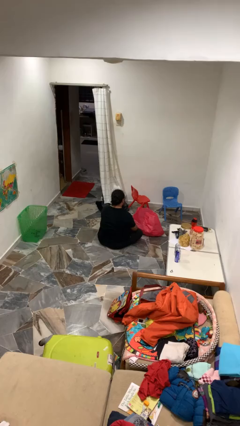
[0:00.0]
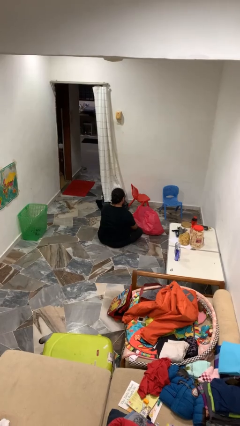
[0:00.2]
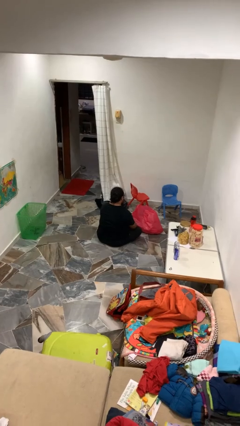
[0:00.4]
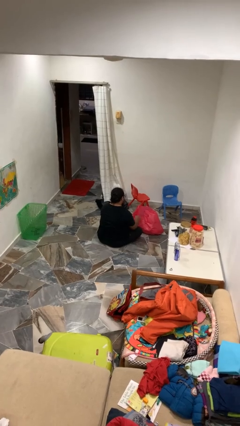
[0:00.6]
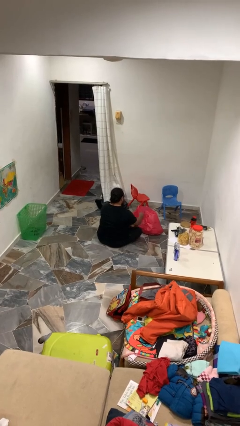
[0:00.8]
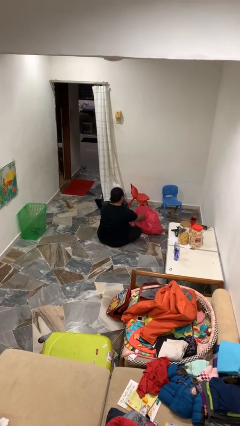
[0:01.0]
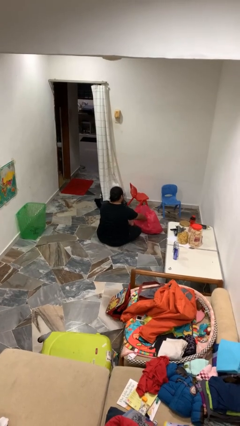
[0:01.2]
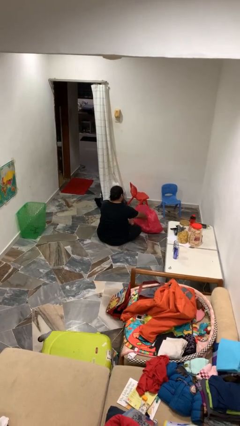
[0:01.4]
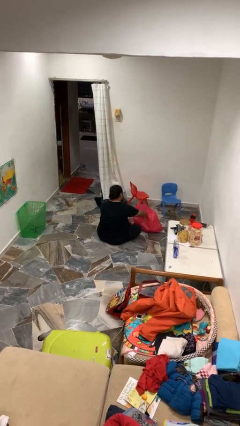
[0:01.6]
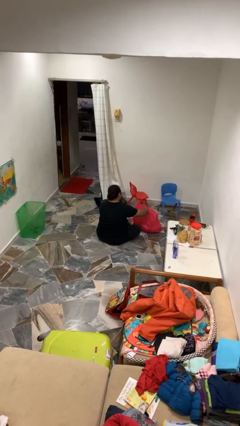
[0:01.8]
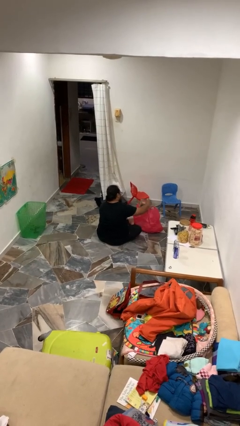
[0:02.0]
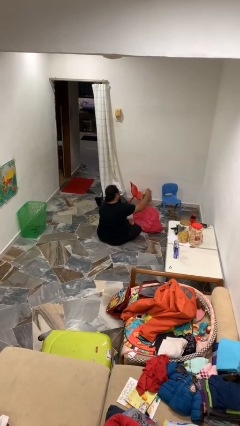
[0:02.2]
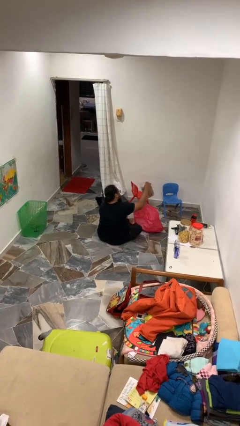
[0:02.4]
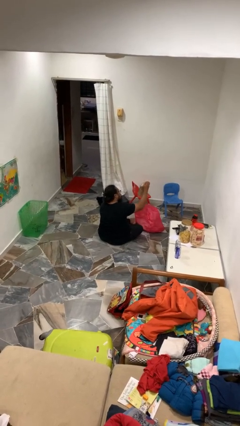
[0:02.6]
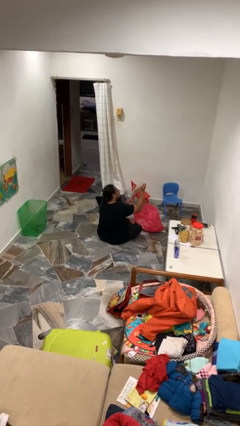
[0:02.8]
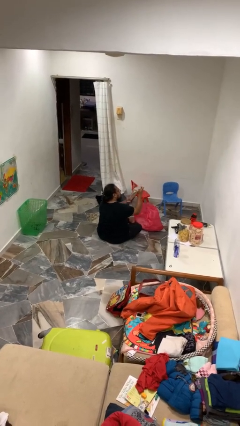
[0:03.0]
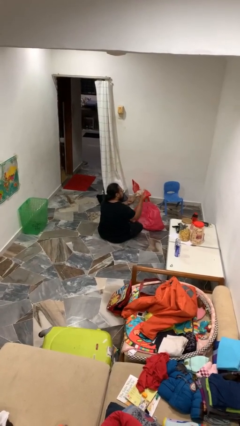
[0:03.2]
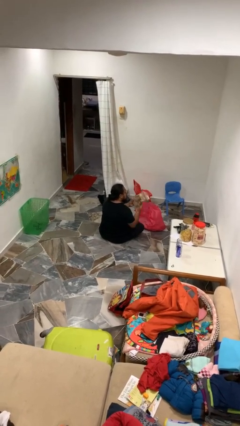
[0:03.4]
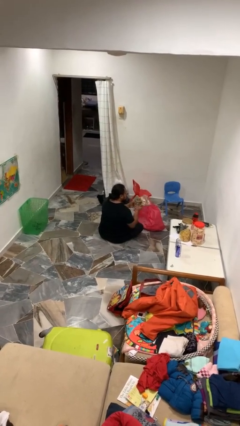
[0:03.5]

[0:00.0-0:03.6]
person takes object from bag

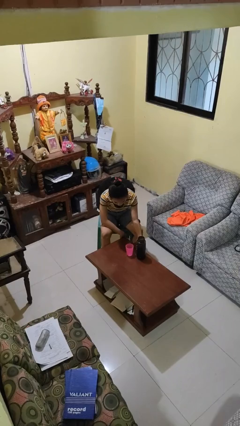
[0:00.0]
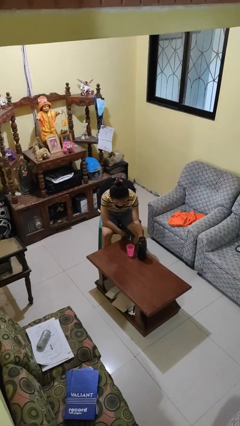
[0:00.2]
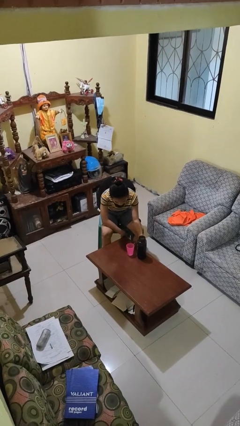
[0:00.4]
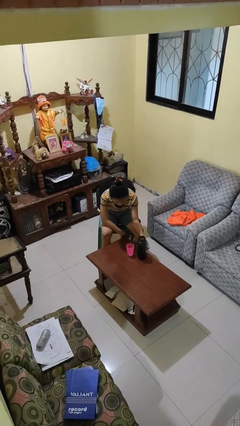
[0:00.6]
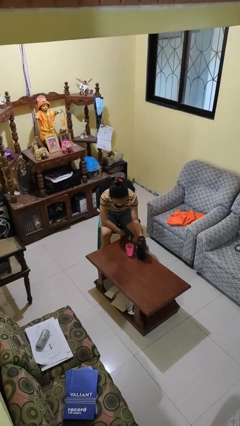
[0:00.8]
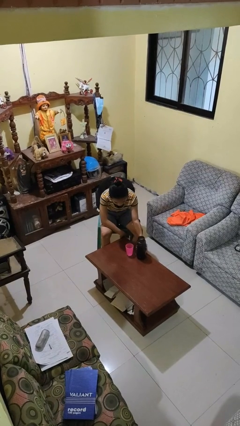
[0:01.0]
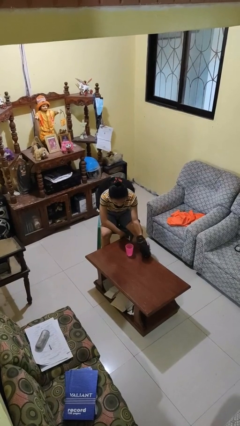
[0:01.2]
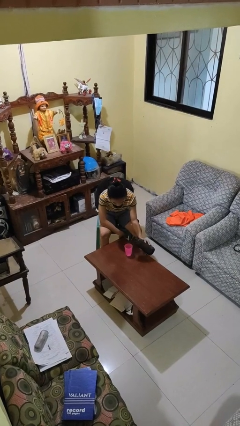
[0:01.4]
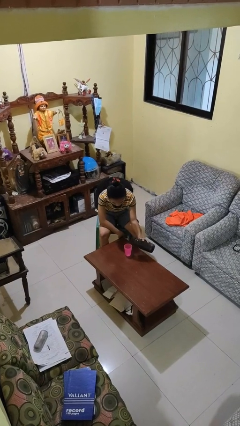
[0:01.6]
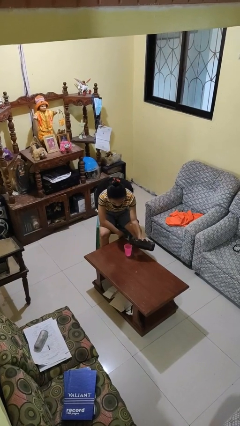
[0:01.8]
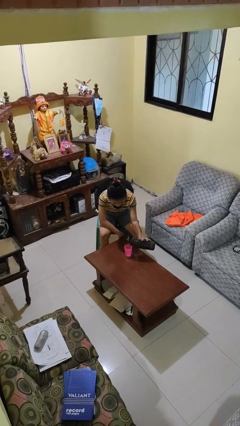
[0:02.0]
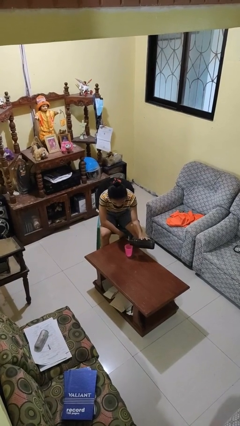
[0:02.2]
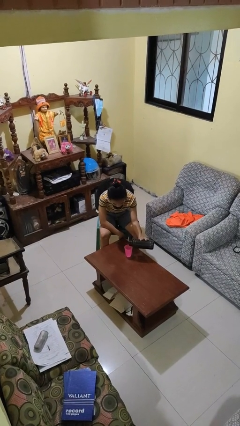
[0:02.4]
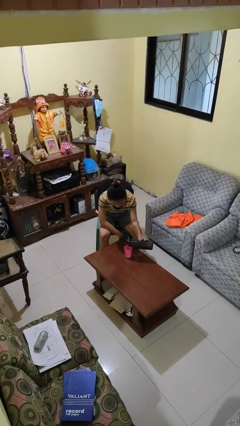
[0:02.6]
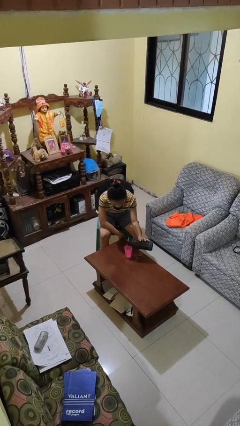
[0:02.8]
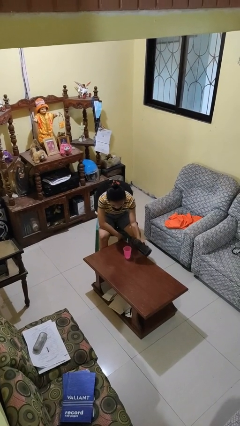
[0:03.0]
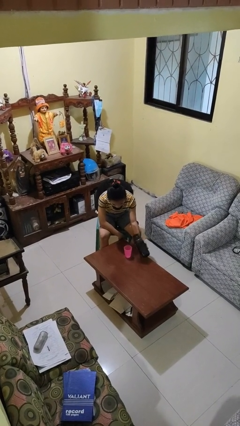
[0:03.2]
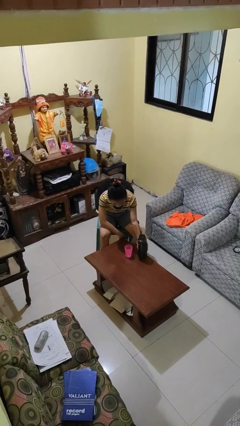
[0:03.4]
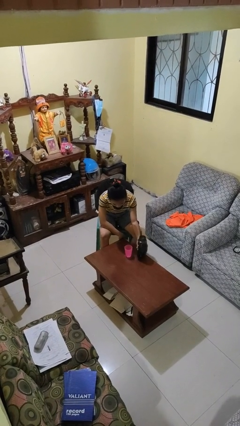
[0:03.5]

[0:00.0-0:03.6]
person pours liquid into cup

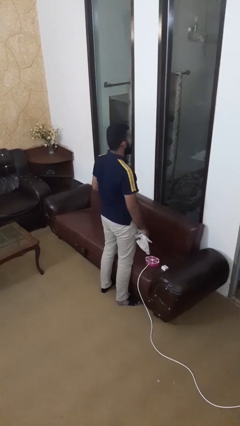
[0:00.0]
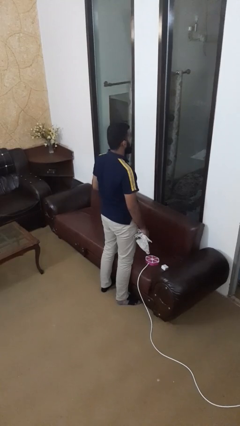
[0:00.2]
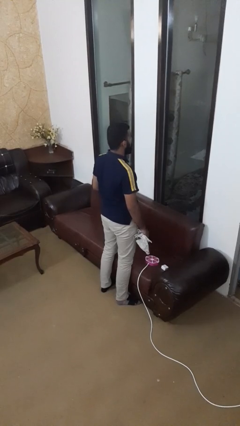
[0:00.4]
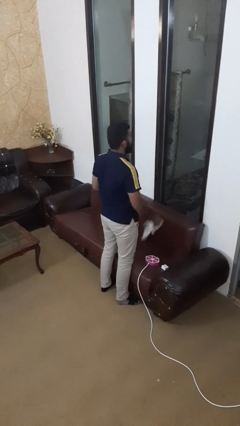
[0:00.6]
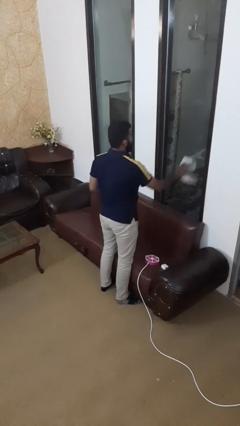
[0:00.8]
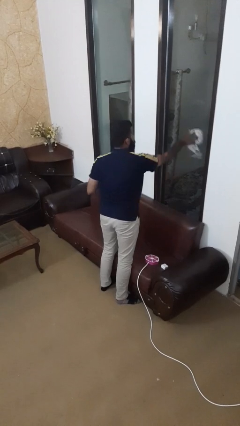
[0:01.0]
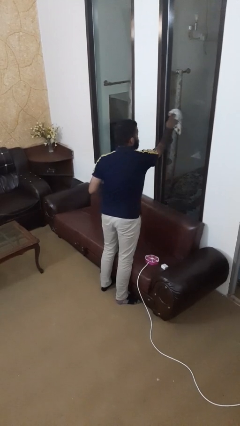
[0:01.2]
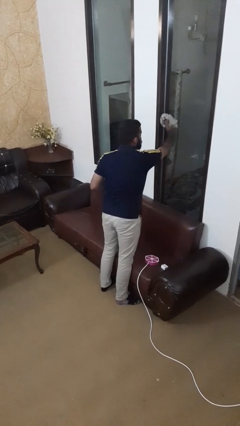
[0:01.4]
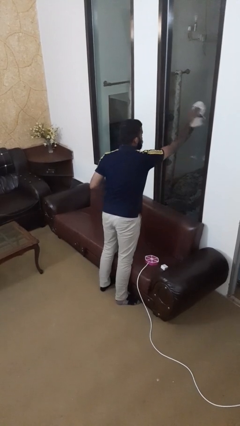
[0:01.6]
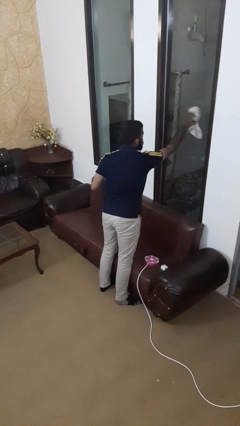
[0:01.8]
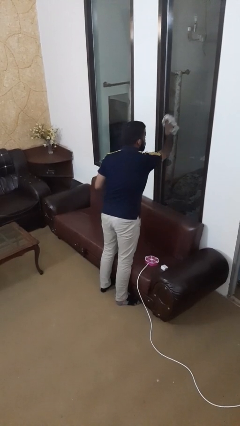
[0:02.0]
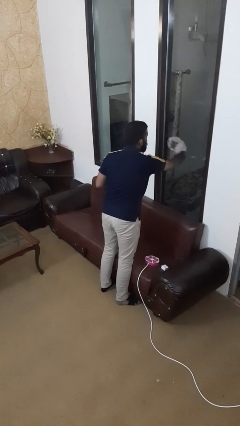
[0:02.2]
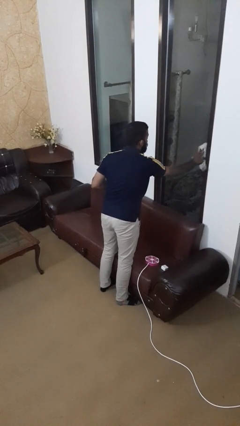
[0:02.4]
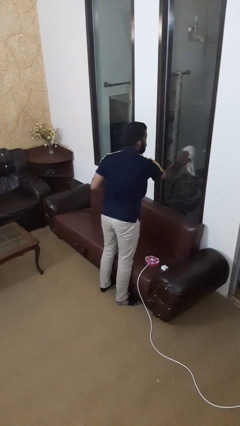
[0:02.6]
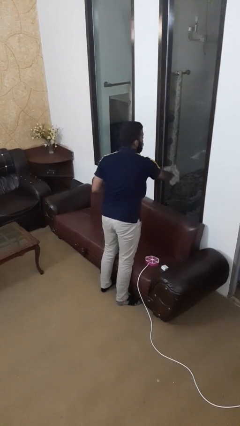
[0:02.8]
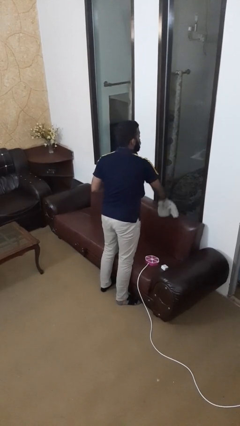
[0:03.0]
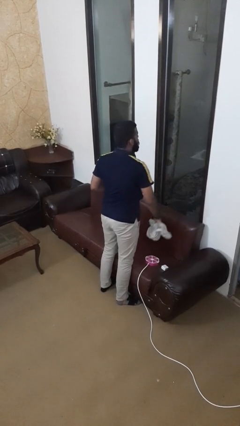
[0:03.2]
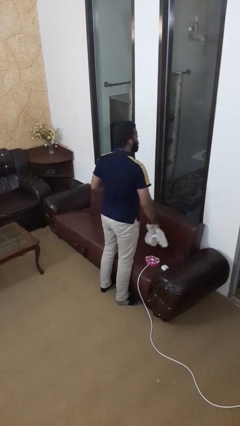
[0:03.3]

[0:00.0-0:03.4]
person washes window

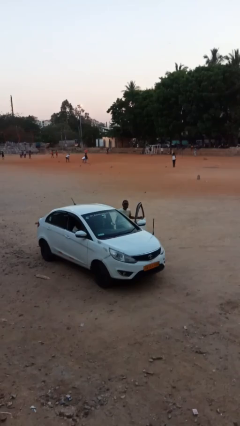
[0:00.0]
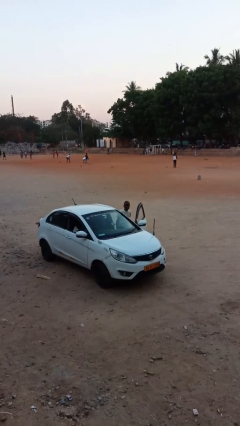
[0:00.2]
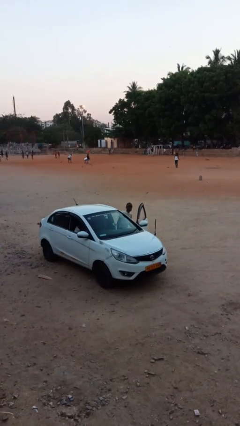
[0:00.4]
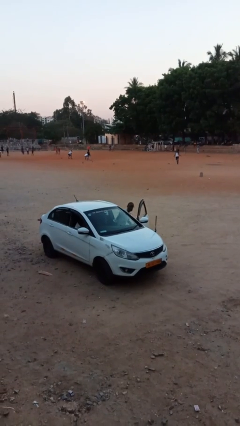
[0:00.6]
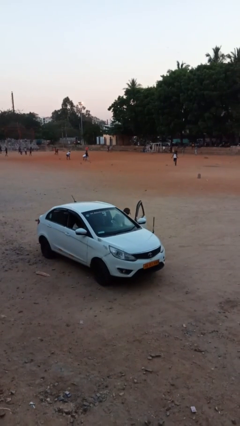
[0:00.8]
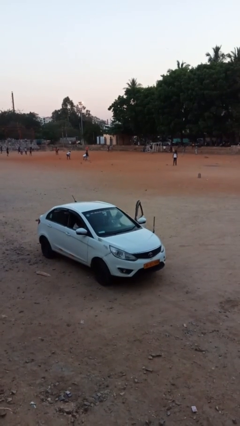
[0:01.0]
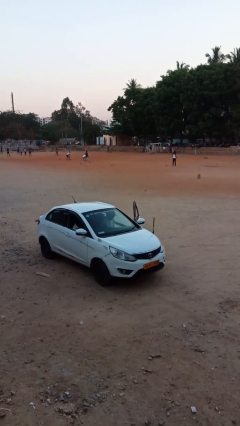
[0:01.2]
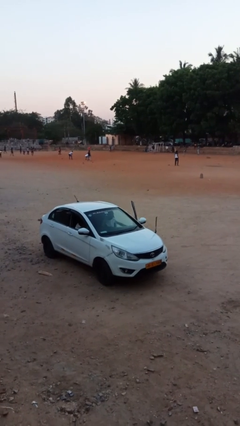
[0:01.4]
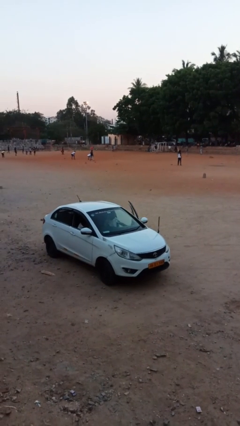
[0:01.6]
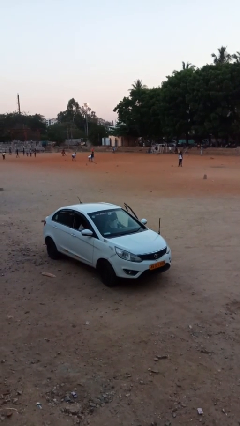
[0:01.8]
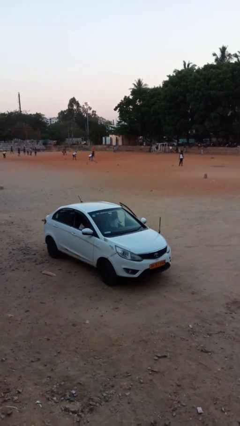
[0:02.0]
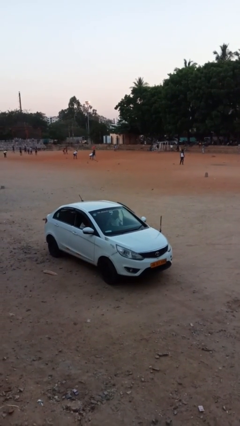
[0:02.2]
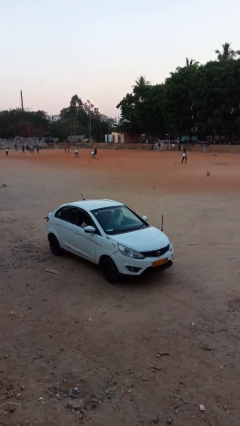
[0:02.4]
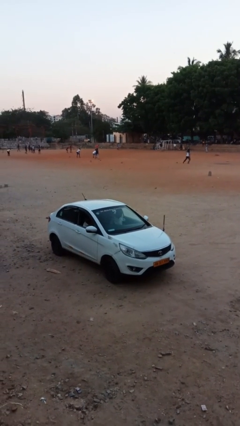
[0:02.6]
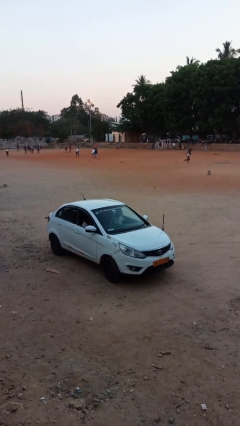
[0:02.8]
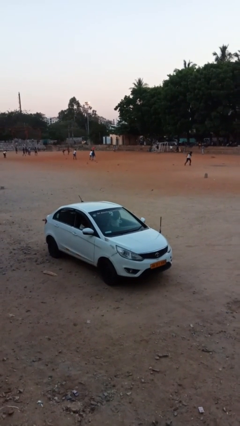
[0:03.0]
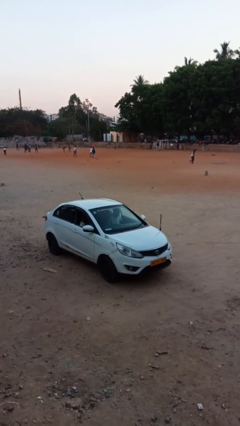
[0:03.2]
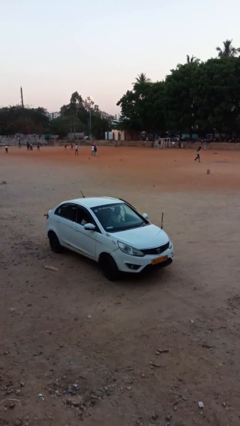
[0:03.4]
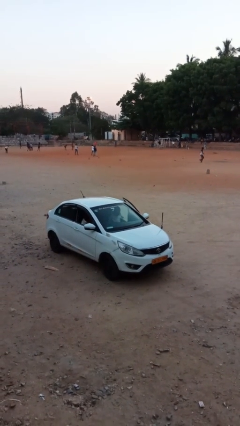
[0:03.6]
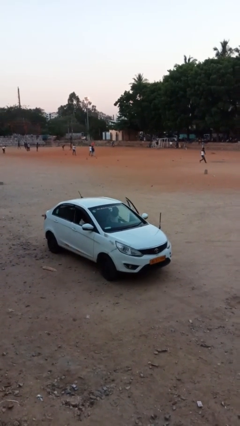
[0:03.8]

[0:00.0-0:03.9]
person enters car

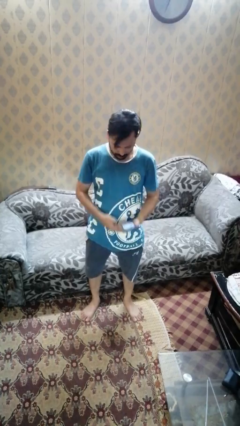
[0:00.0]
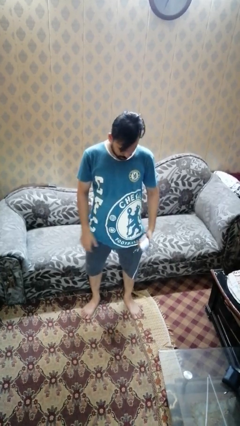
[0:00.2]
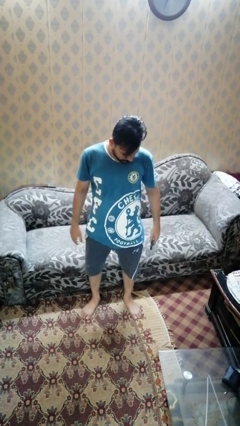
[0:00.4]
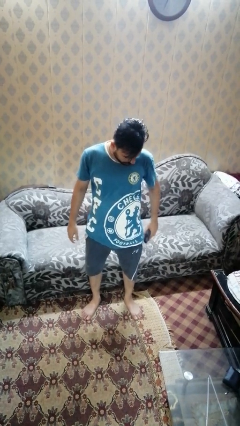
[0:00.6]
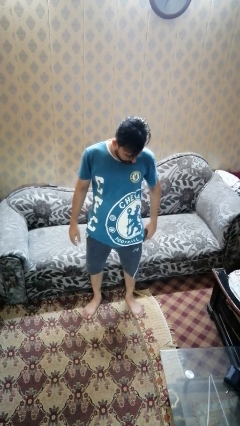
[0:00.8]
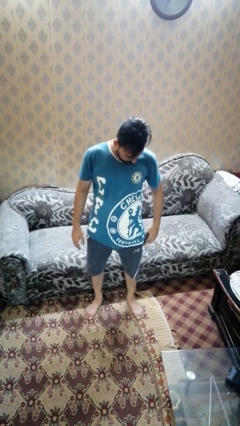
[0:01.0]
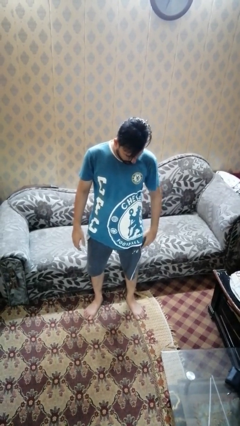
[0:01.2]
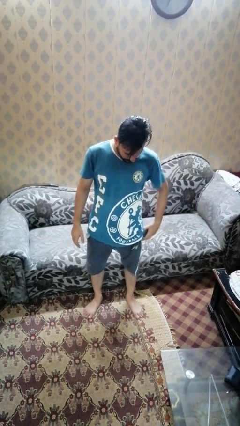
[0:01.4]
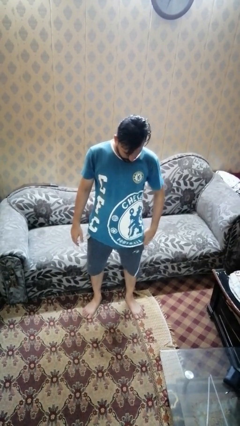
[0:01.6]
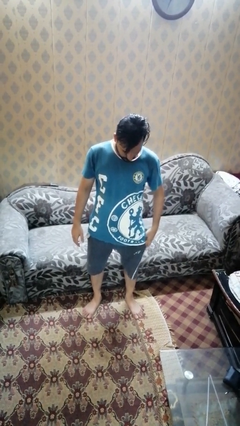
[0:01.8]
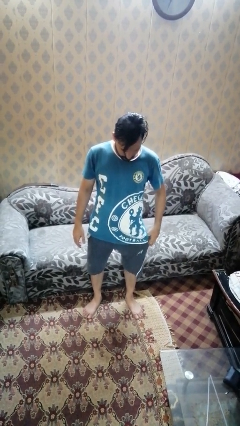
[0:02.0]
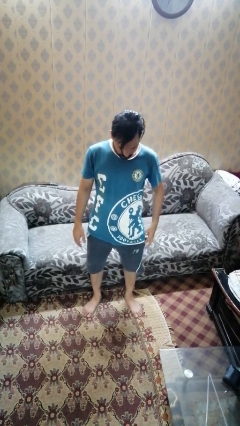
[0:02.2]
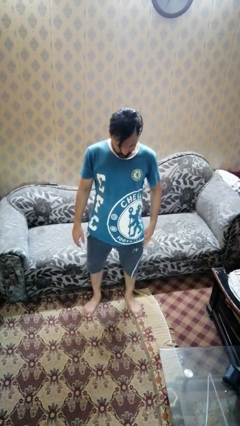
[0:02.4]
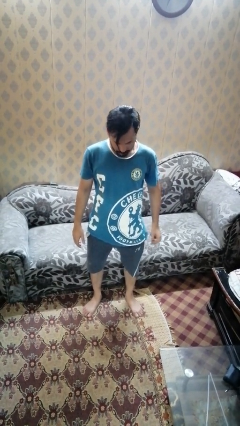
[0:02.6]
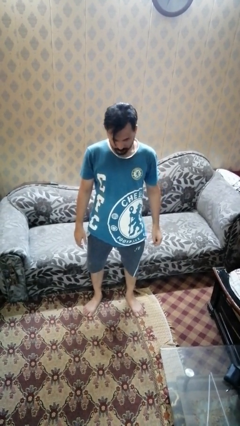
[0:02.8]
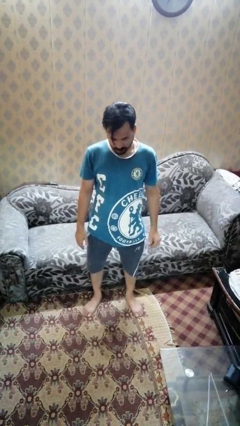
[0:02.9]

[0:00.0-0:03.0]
person puts phone into pocket

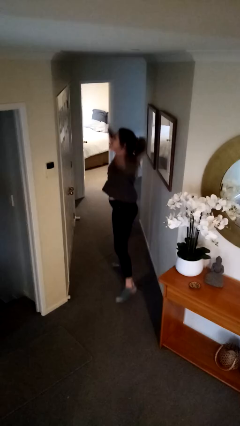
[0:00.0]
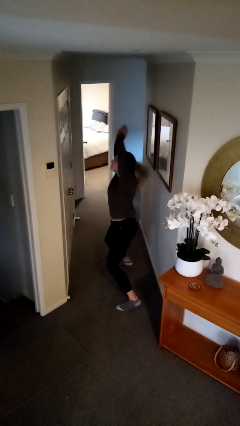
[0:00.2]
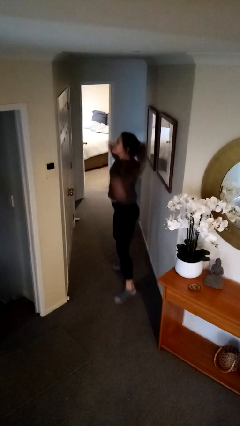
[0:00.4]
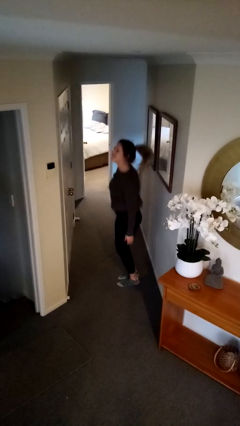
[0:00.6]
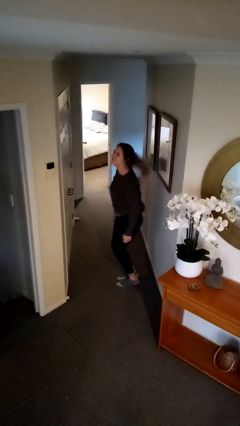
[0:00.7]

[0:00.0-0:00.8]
person exercises with jumping jacks
